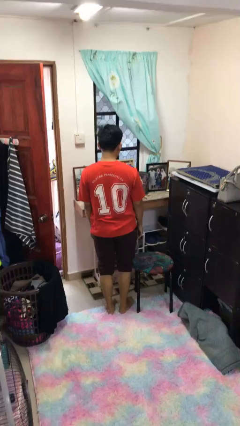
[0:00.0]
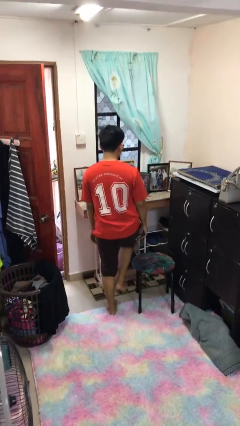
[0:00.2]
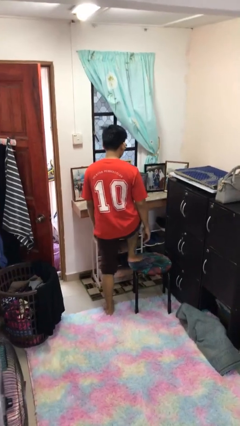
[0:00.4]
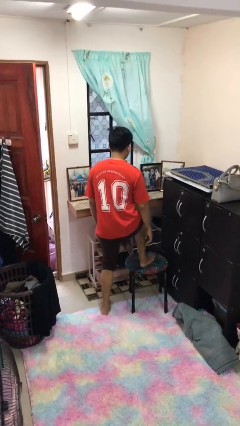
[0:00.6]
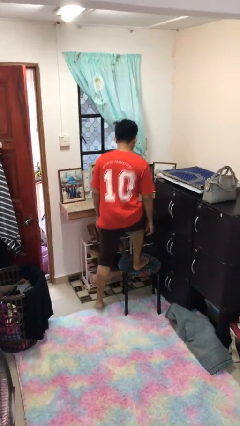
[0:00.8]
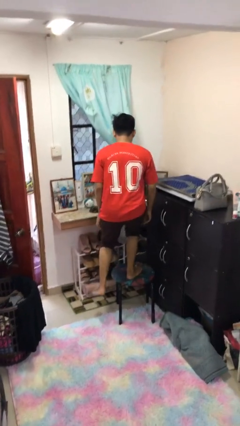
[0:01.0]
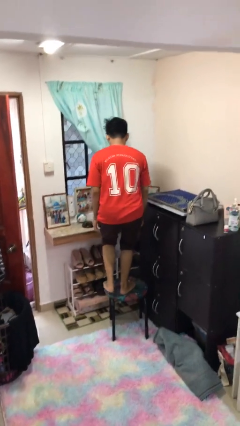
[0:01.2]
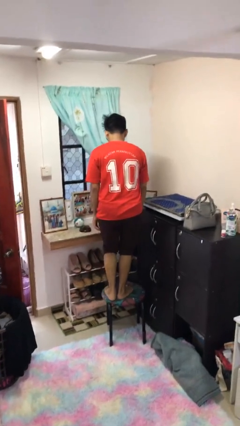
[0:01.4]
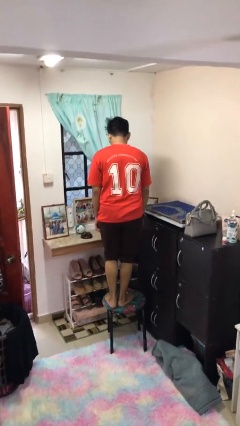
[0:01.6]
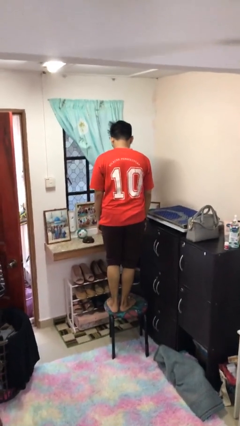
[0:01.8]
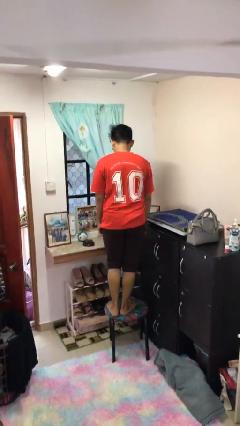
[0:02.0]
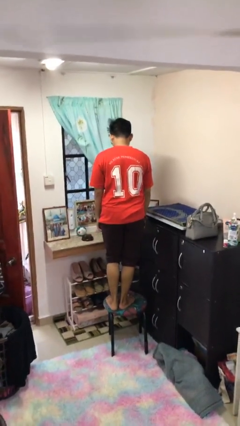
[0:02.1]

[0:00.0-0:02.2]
person climbs on chair

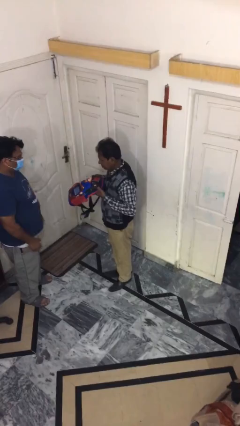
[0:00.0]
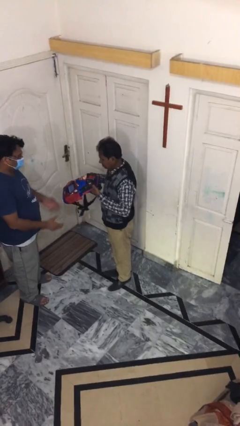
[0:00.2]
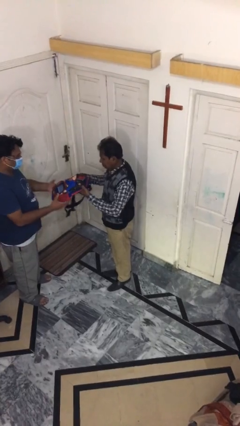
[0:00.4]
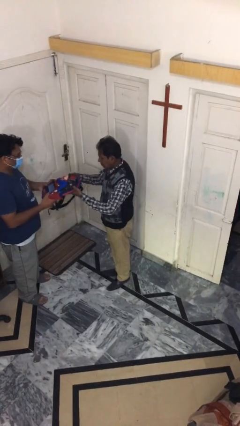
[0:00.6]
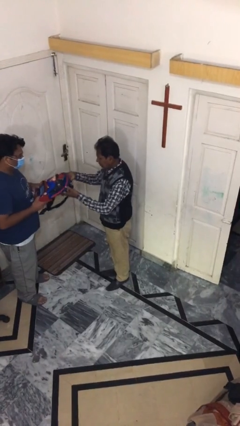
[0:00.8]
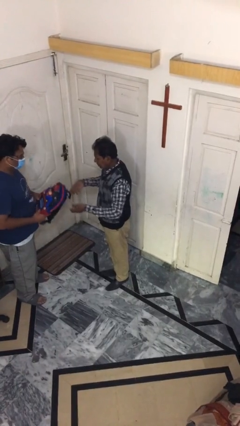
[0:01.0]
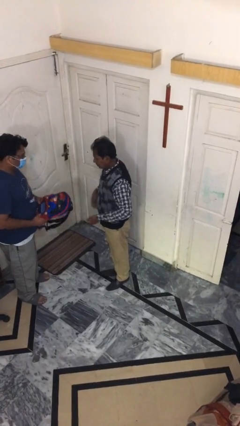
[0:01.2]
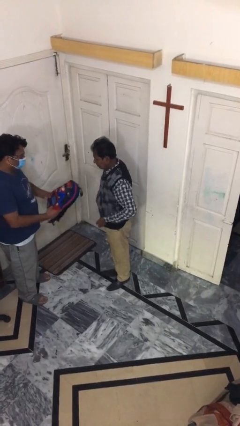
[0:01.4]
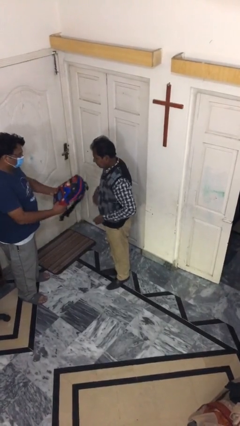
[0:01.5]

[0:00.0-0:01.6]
person transfers object to person

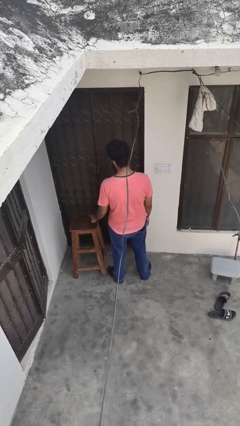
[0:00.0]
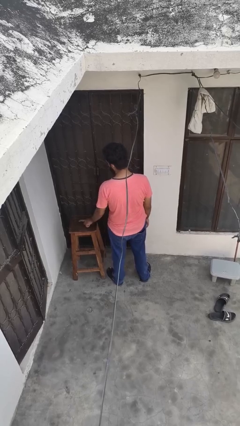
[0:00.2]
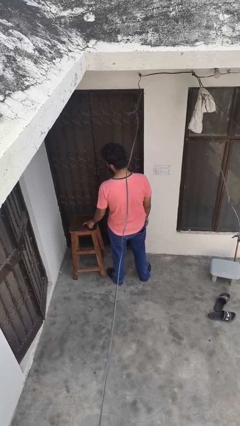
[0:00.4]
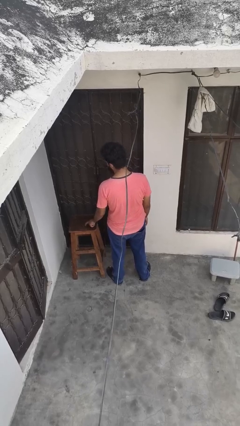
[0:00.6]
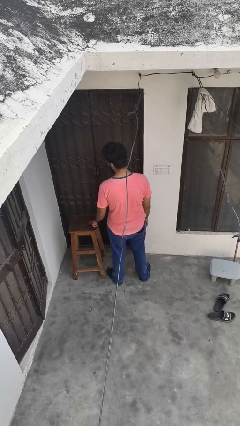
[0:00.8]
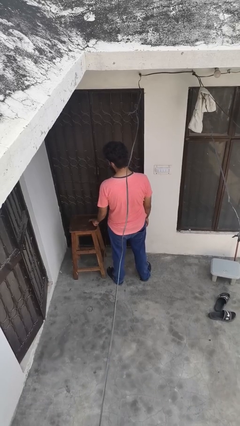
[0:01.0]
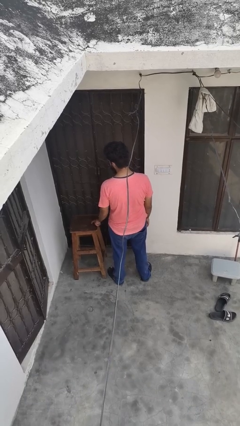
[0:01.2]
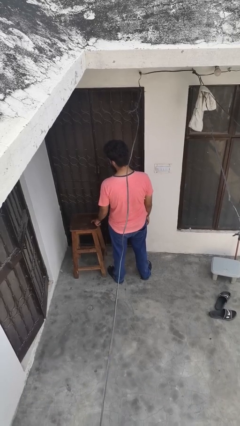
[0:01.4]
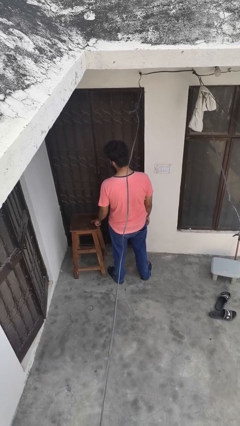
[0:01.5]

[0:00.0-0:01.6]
person taps object with finger

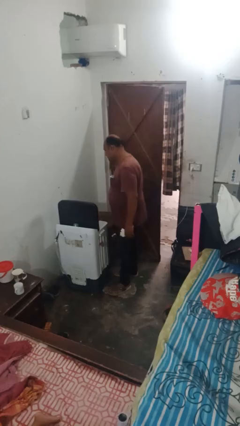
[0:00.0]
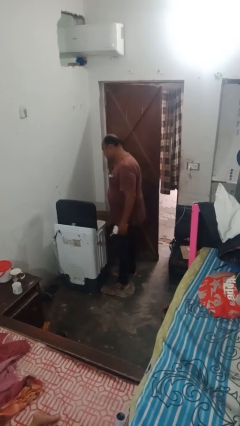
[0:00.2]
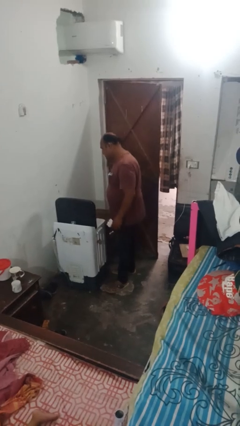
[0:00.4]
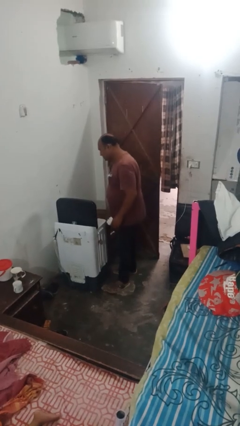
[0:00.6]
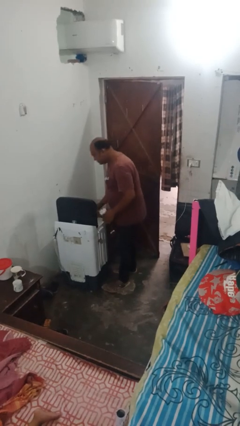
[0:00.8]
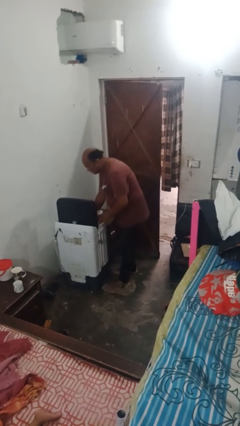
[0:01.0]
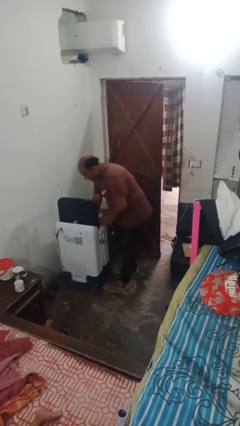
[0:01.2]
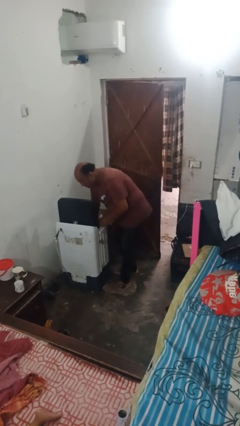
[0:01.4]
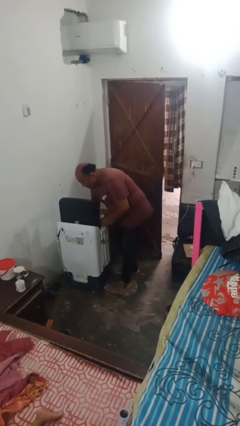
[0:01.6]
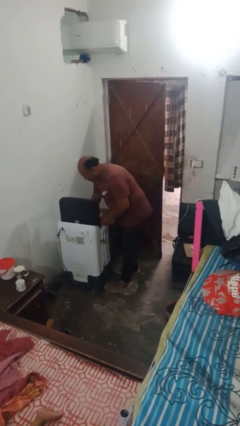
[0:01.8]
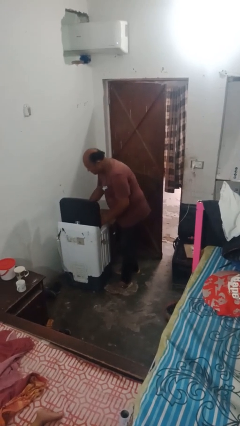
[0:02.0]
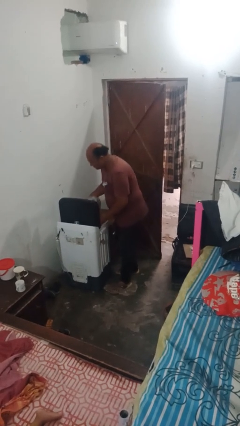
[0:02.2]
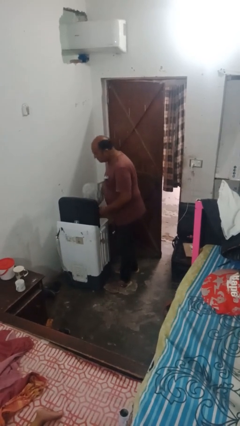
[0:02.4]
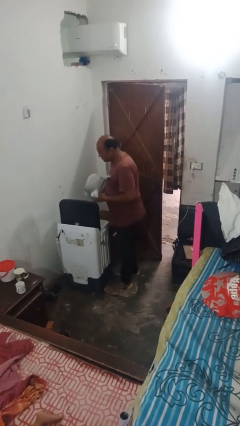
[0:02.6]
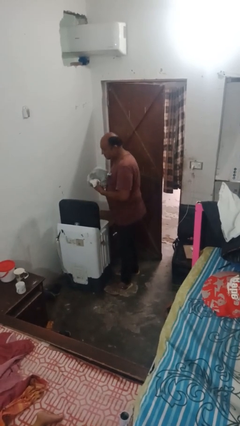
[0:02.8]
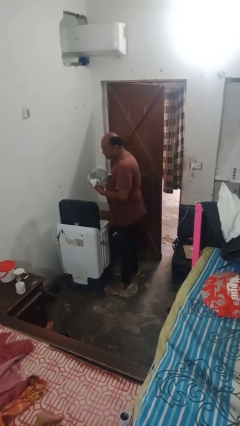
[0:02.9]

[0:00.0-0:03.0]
person unloads dryer

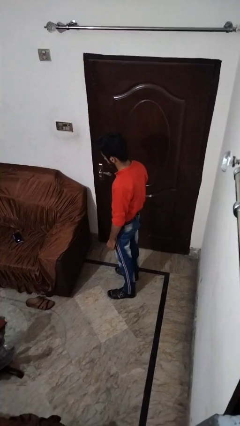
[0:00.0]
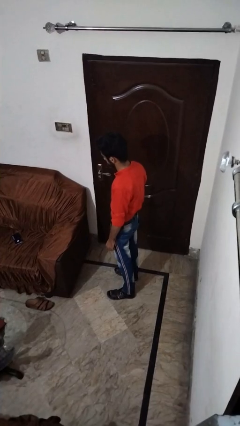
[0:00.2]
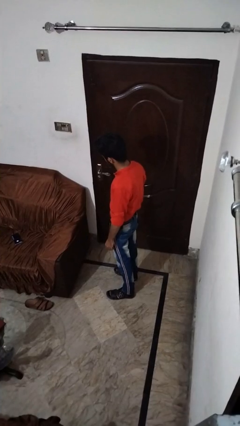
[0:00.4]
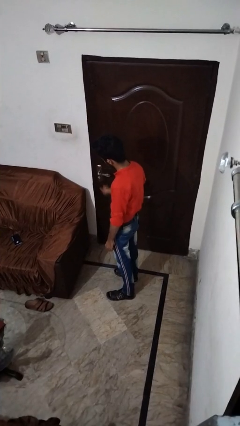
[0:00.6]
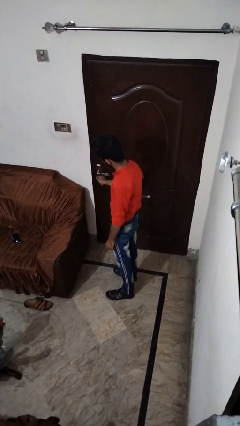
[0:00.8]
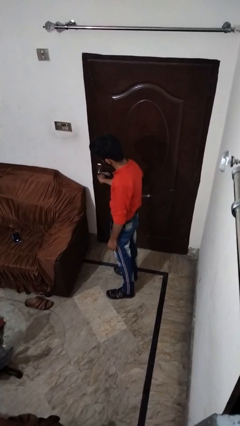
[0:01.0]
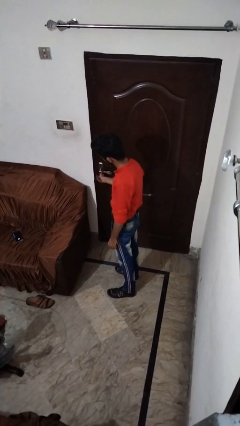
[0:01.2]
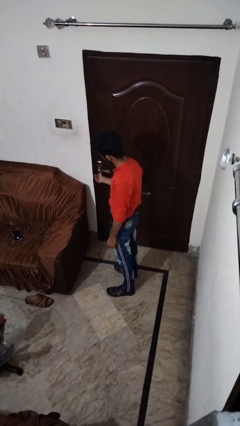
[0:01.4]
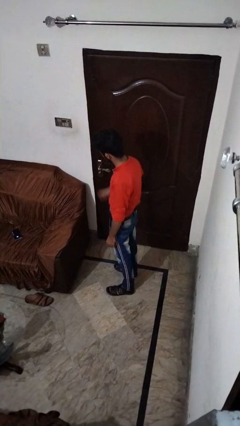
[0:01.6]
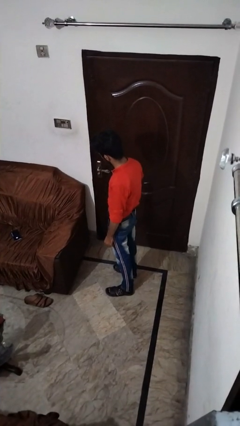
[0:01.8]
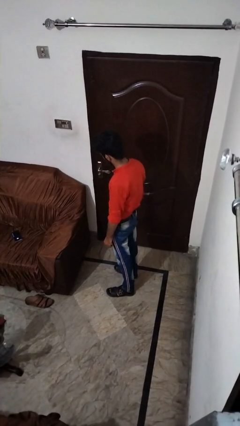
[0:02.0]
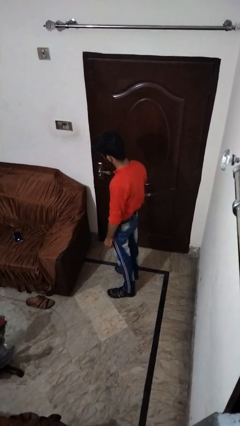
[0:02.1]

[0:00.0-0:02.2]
person unlocks door with keys

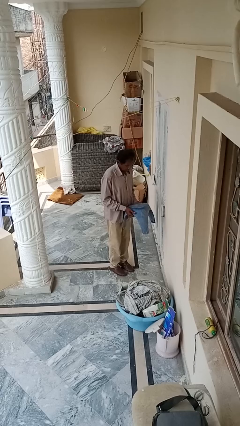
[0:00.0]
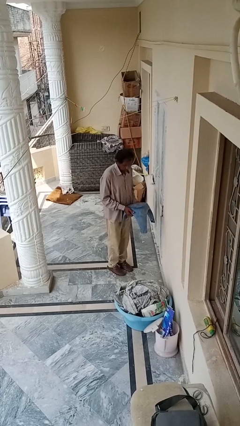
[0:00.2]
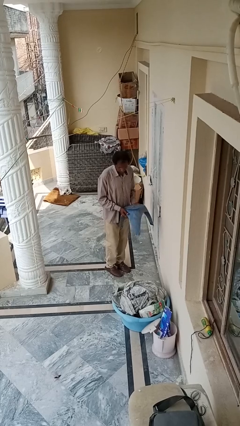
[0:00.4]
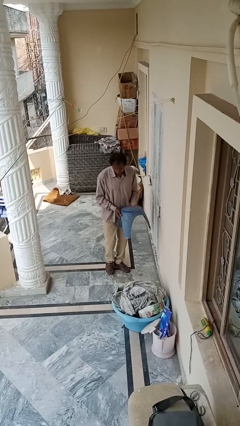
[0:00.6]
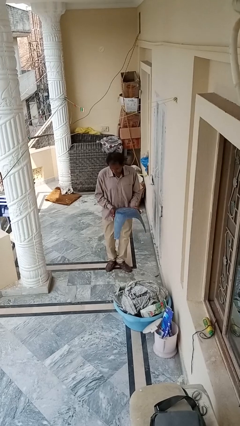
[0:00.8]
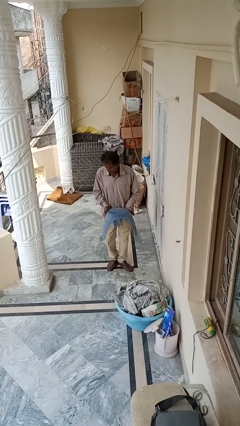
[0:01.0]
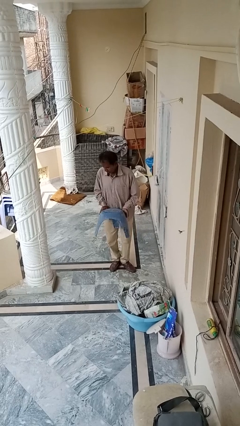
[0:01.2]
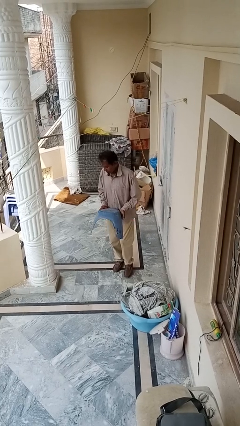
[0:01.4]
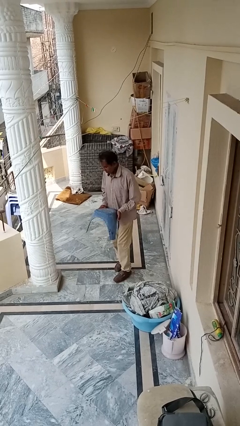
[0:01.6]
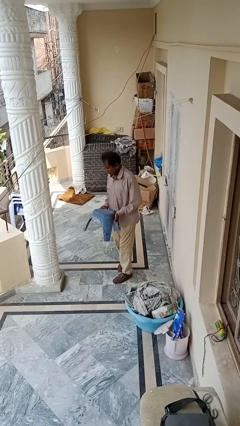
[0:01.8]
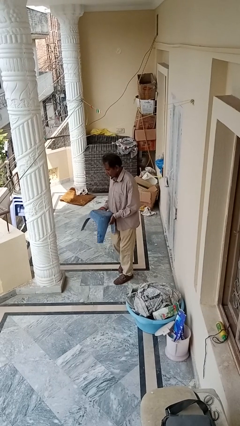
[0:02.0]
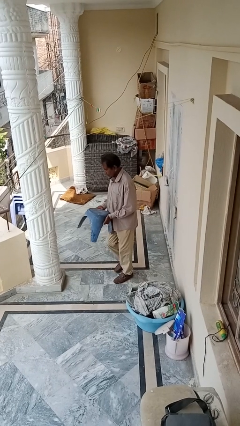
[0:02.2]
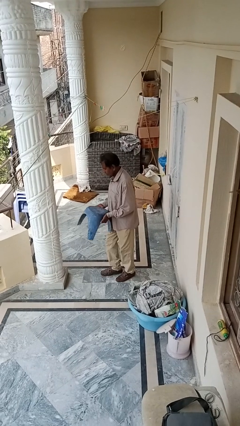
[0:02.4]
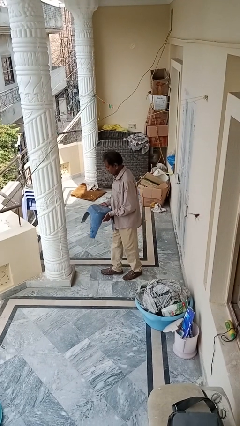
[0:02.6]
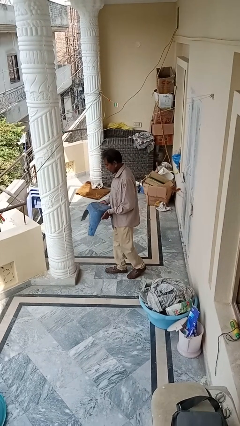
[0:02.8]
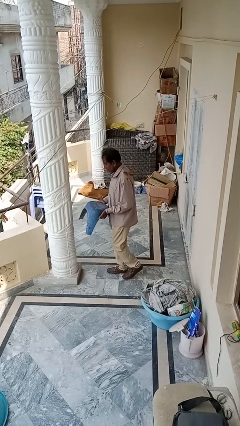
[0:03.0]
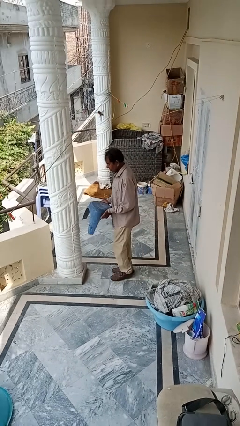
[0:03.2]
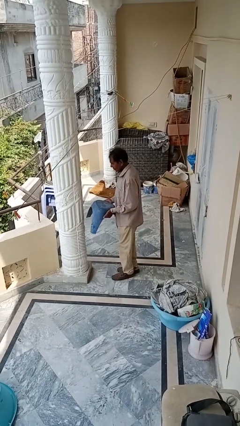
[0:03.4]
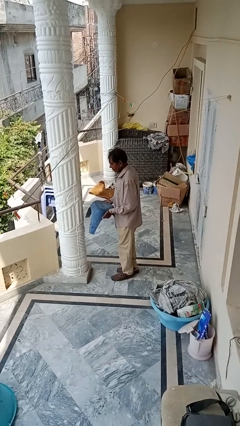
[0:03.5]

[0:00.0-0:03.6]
person carries furniture

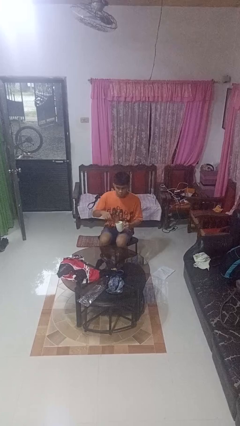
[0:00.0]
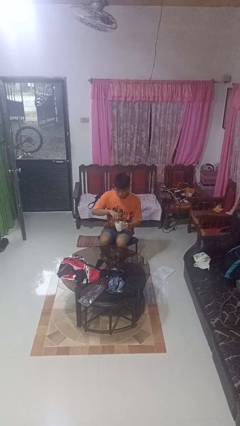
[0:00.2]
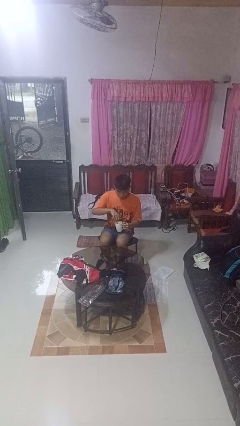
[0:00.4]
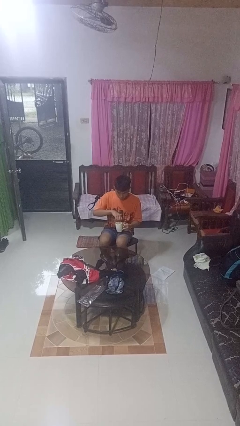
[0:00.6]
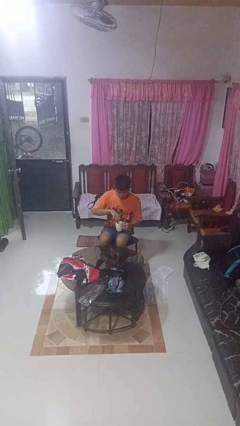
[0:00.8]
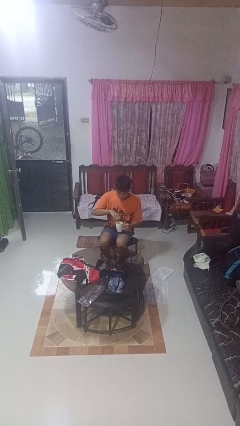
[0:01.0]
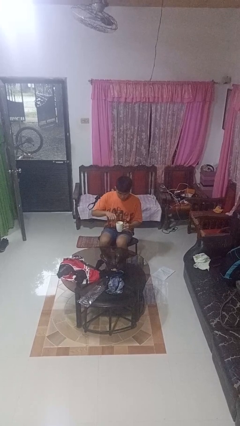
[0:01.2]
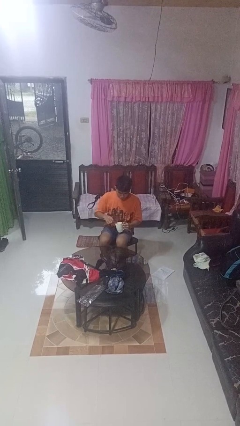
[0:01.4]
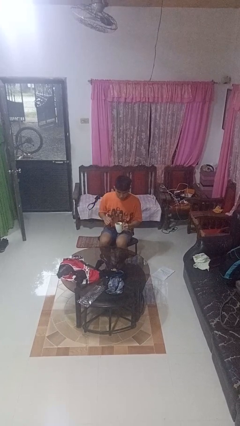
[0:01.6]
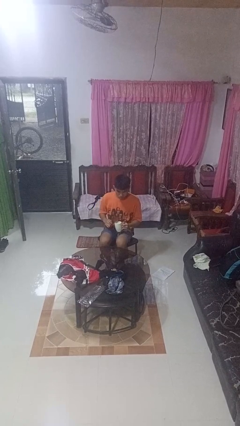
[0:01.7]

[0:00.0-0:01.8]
person stirs mug

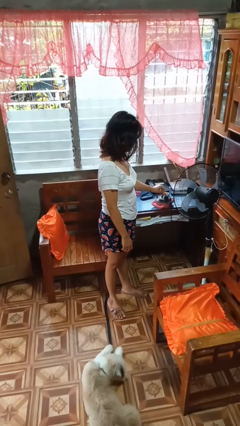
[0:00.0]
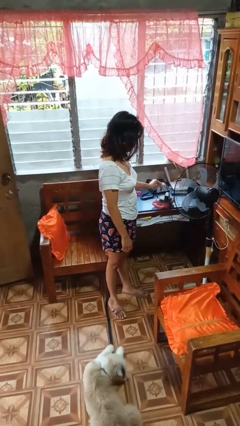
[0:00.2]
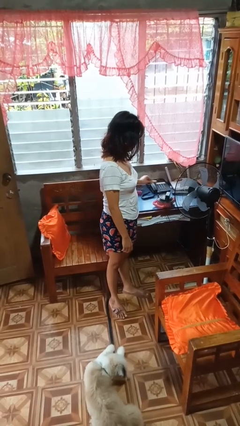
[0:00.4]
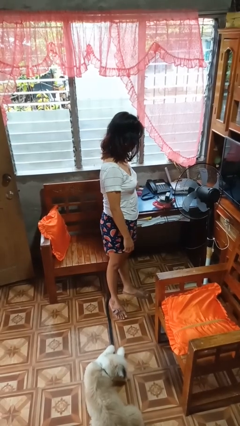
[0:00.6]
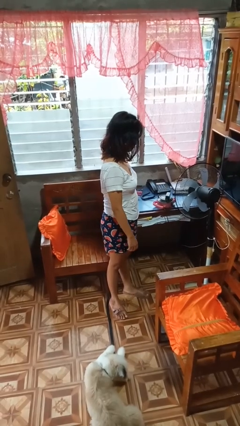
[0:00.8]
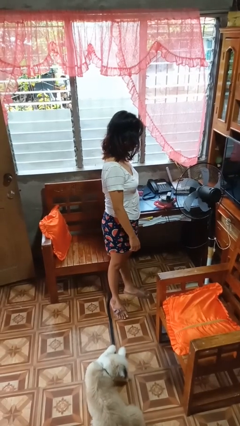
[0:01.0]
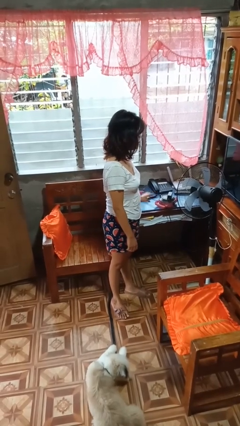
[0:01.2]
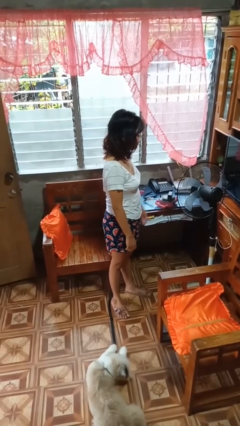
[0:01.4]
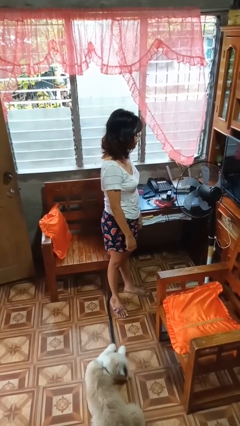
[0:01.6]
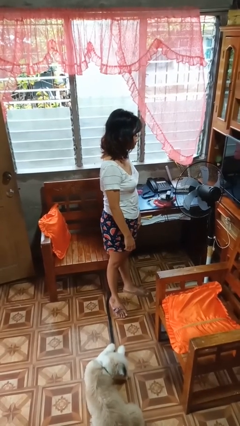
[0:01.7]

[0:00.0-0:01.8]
person unplugs from electrical socket
